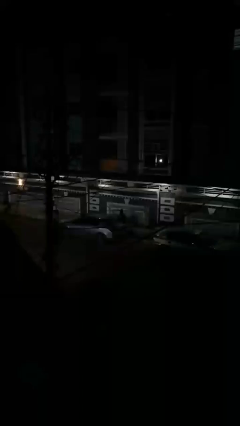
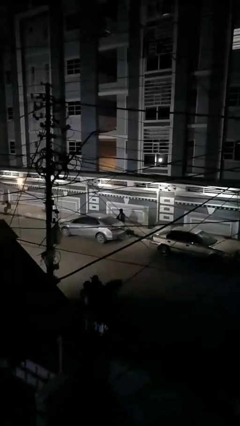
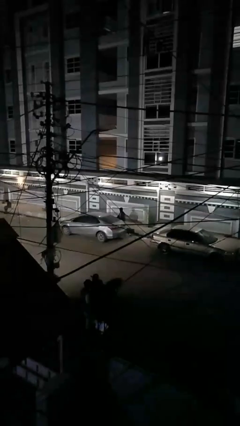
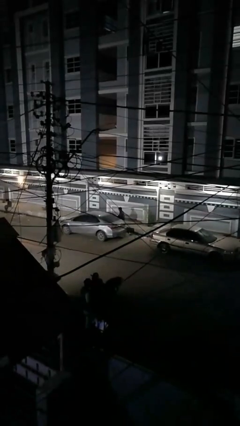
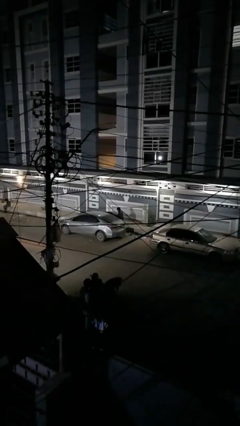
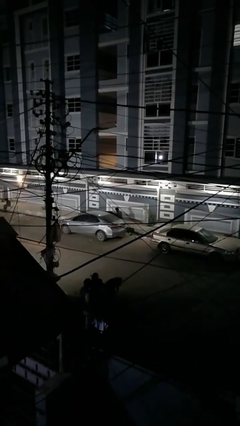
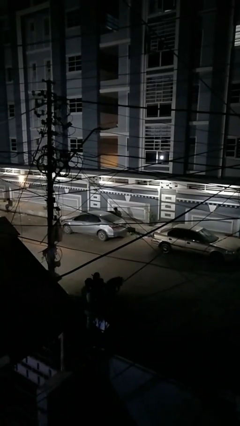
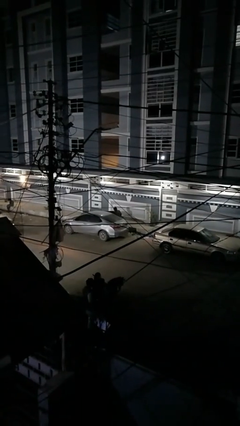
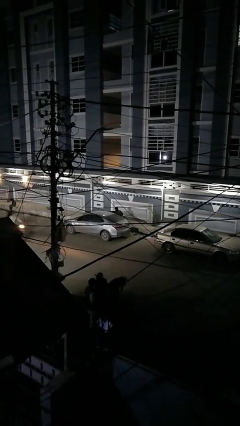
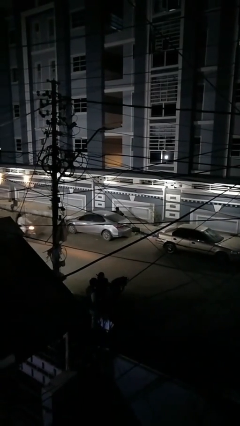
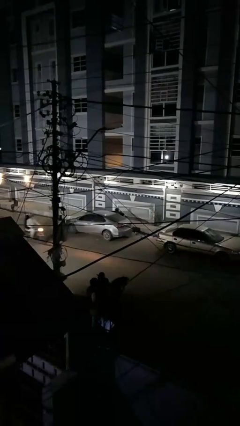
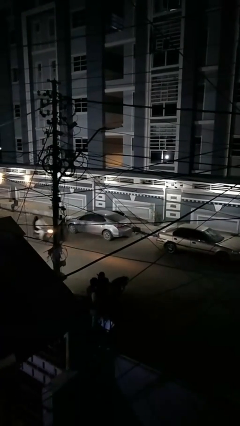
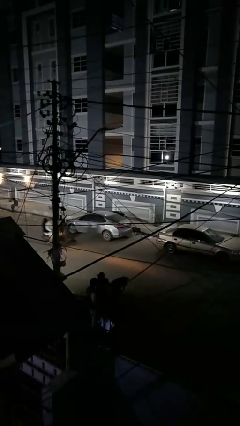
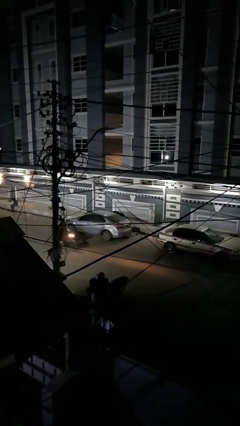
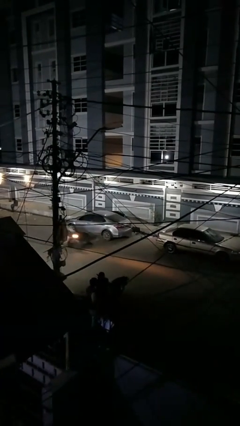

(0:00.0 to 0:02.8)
car picks up person

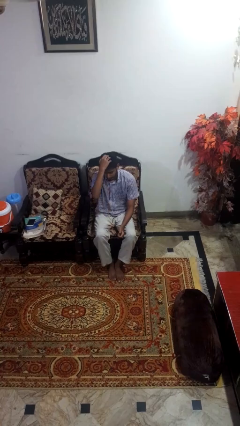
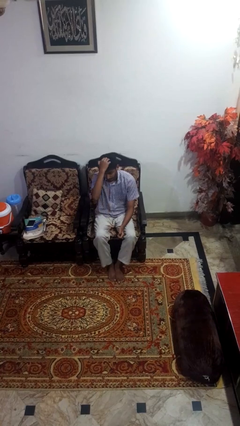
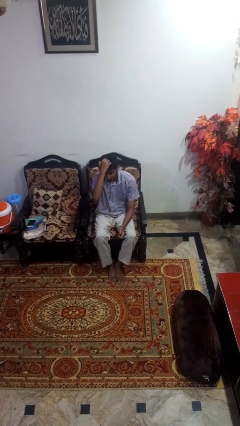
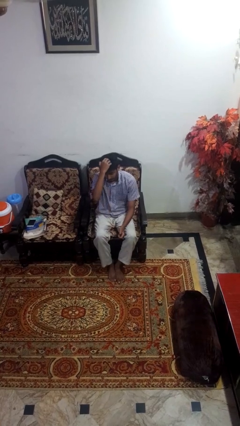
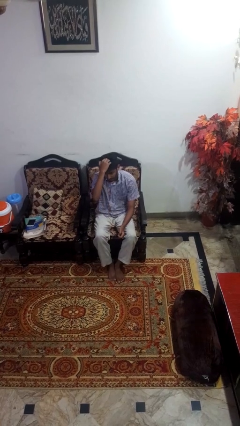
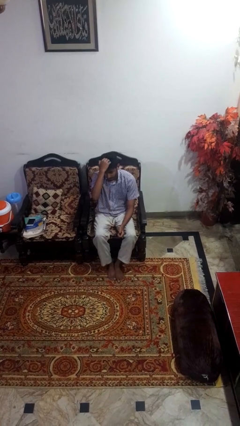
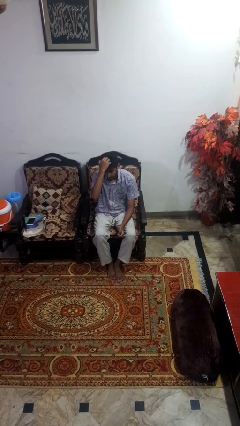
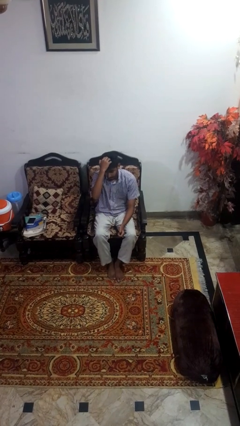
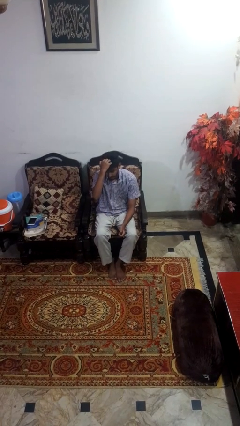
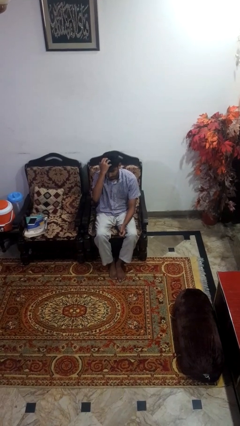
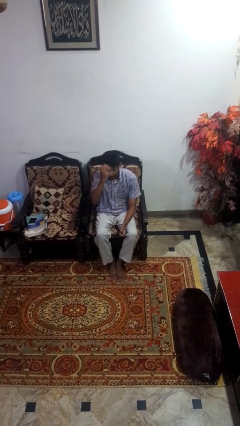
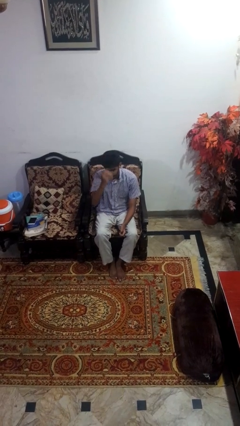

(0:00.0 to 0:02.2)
person scratches face

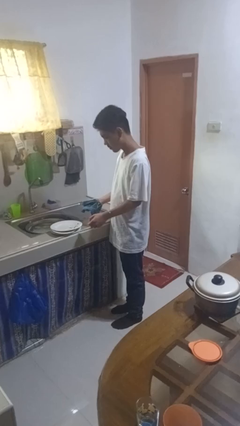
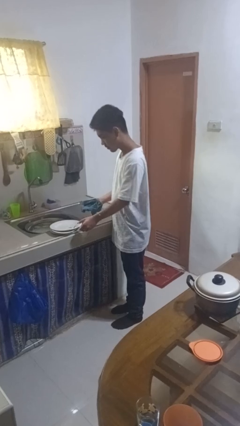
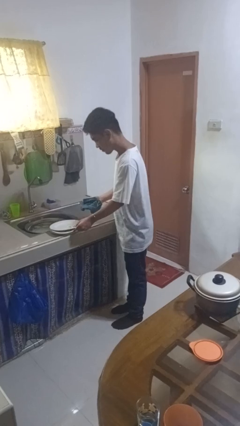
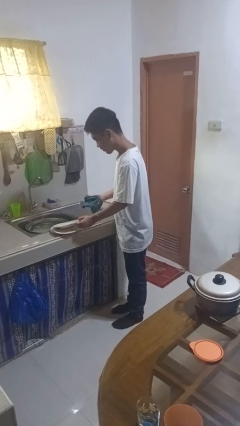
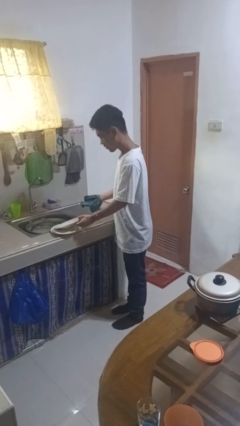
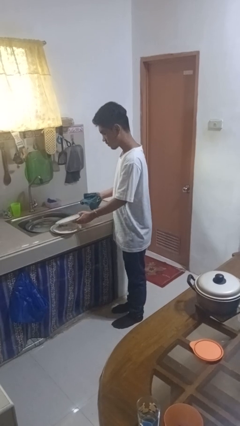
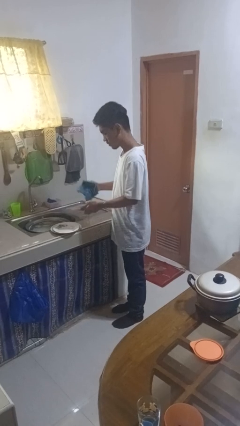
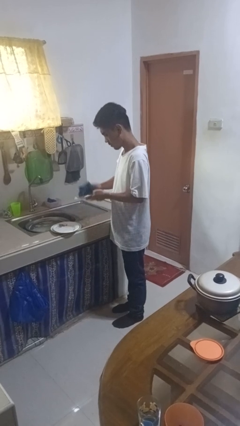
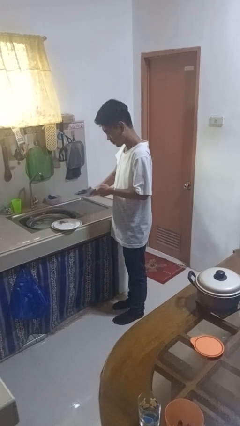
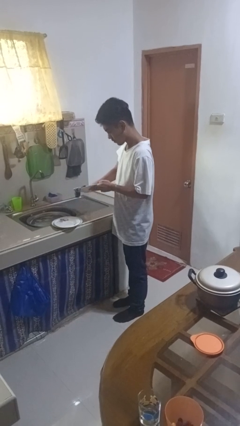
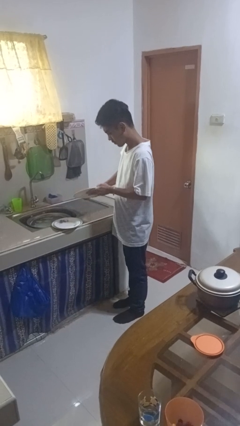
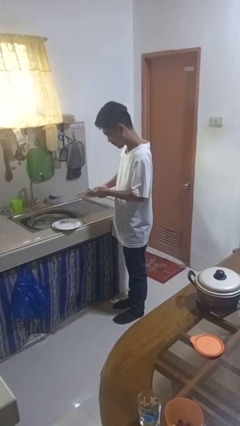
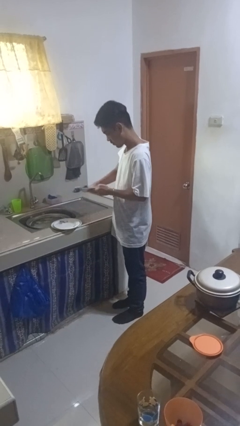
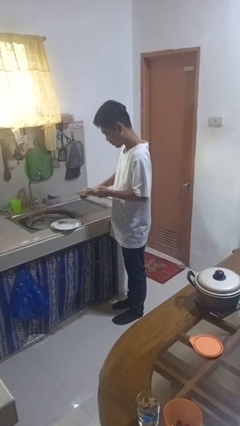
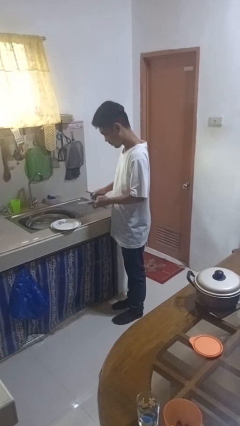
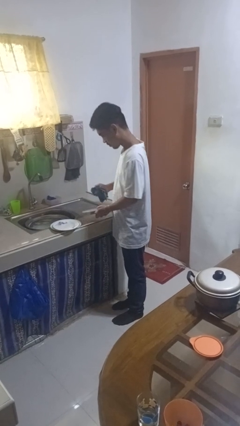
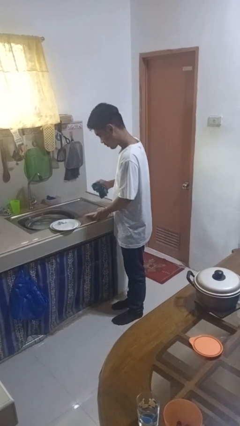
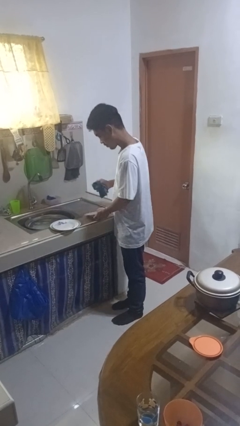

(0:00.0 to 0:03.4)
person dries dish

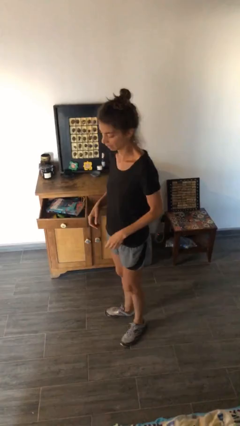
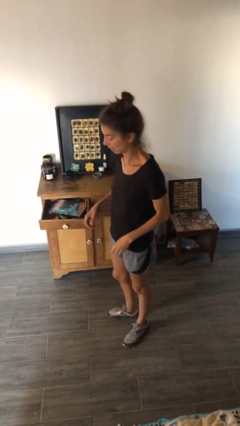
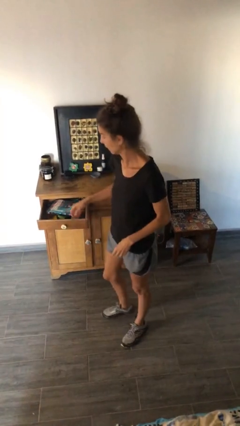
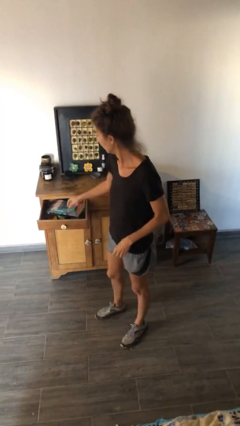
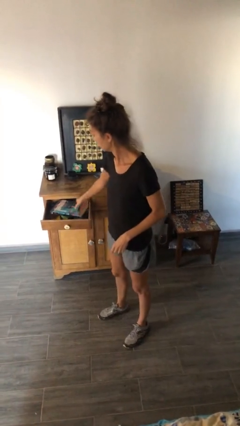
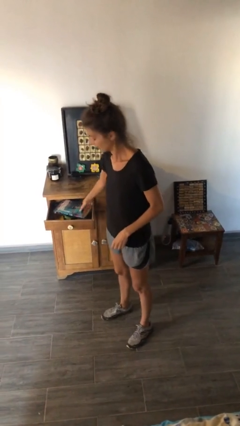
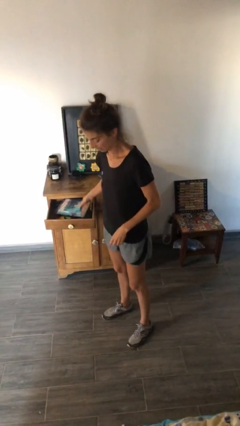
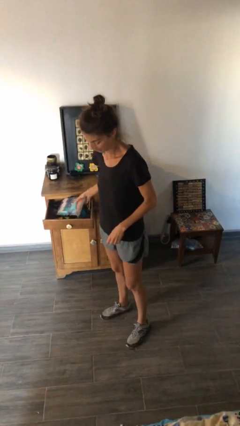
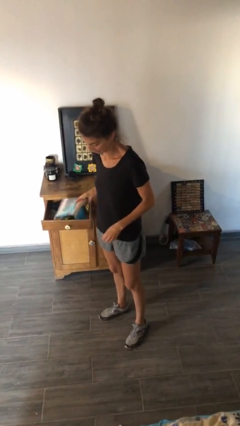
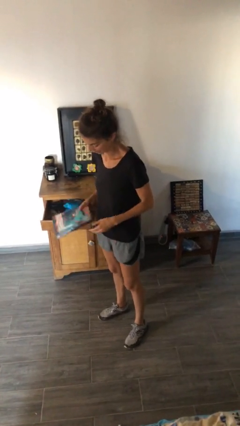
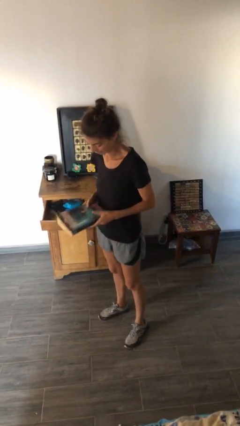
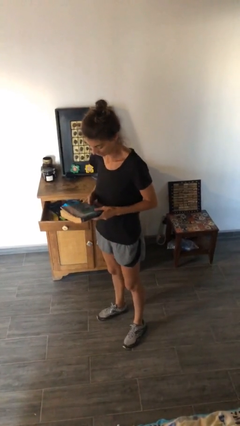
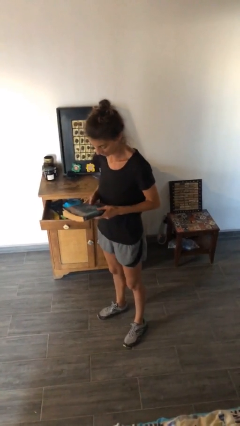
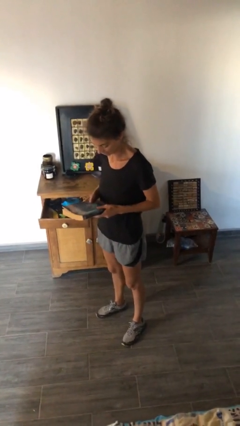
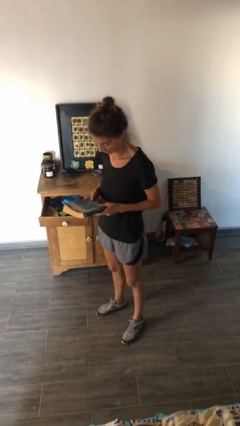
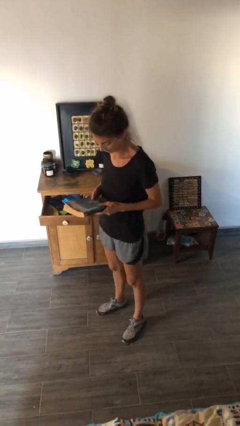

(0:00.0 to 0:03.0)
person picks up object from cabinet

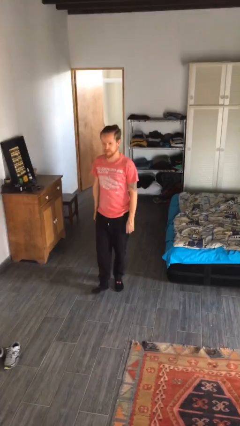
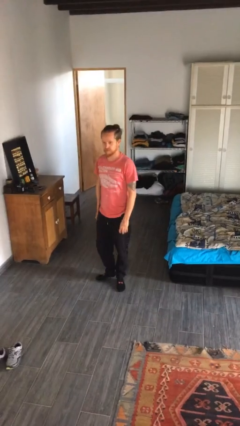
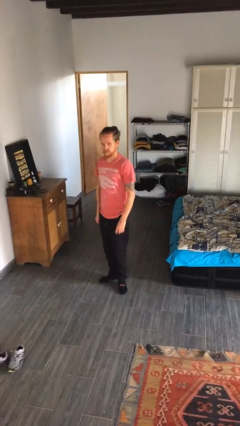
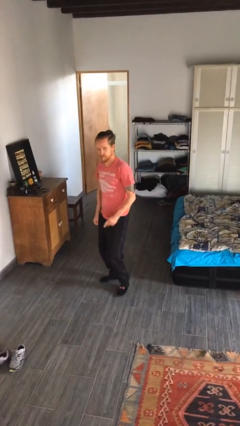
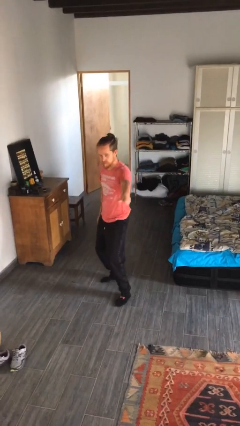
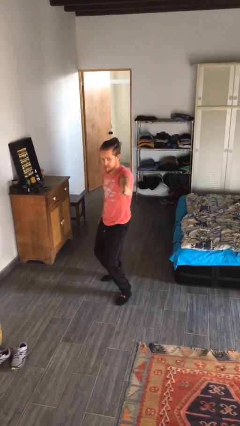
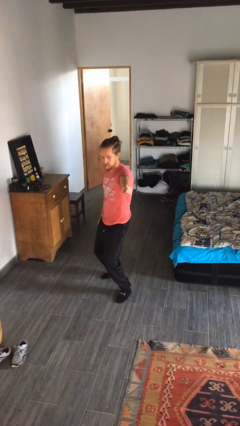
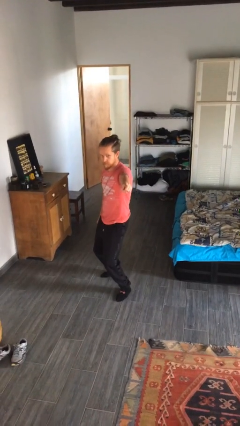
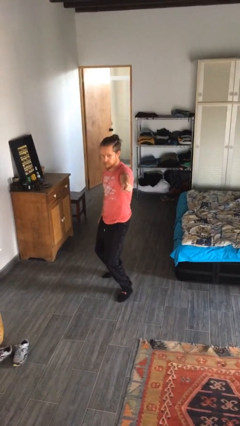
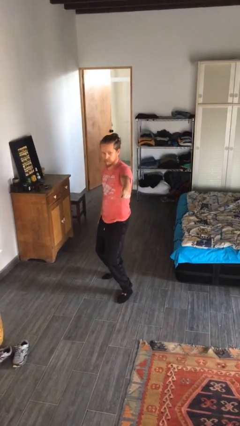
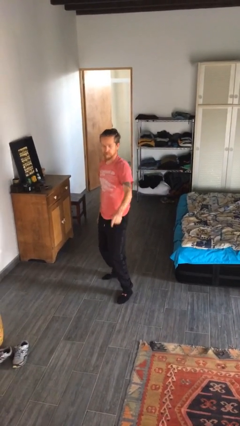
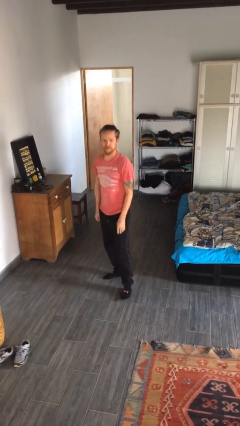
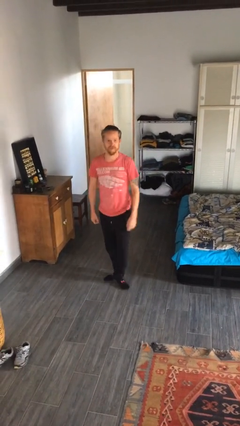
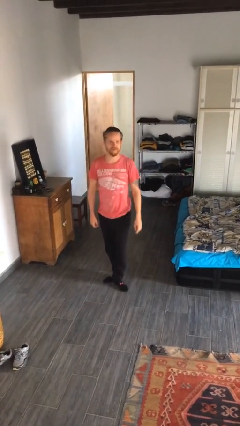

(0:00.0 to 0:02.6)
person points at person

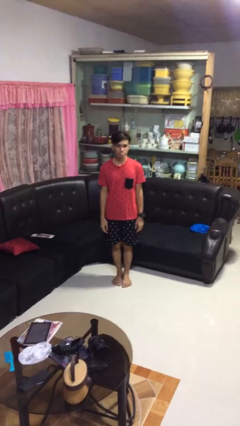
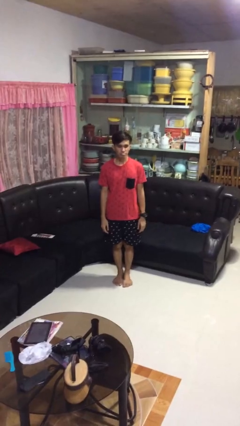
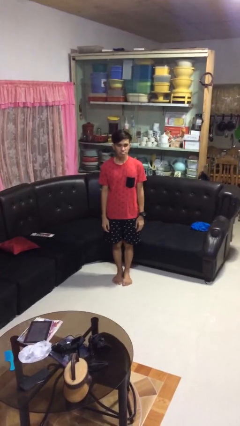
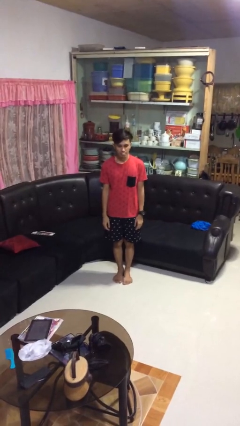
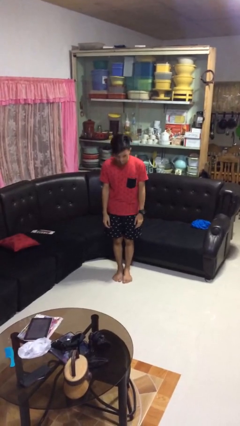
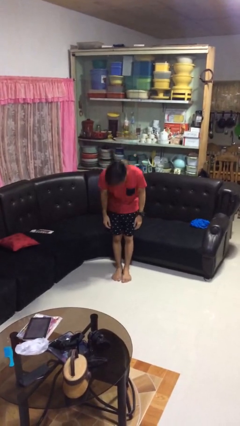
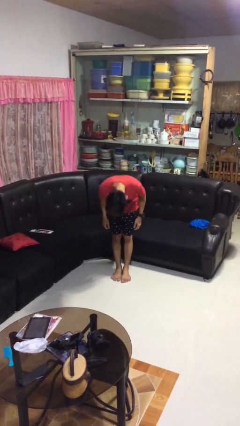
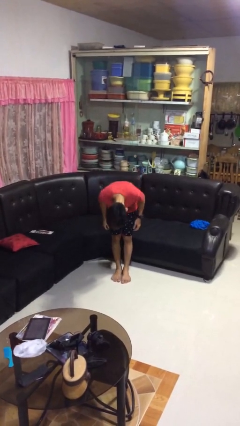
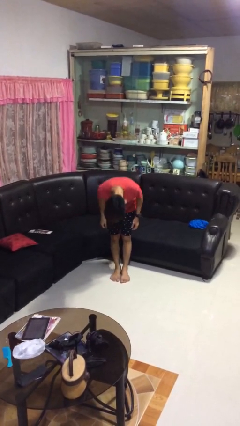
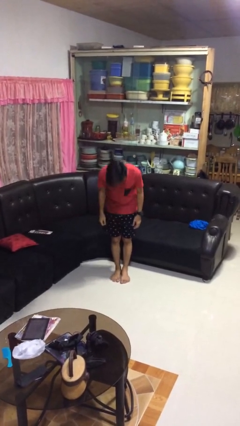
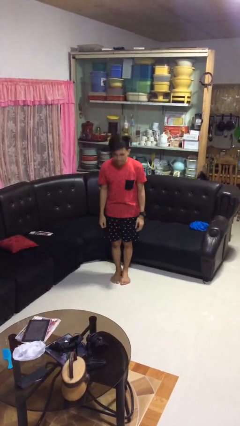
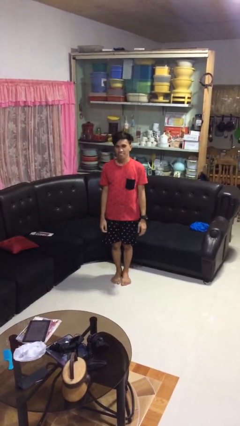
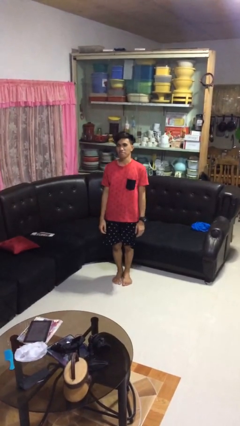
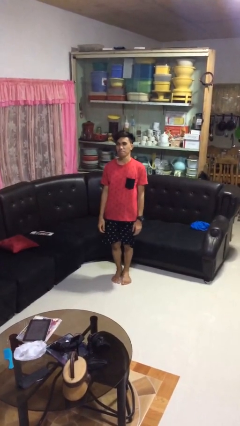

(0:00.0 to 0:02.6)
person bows

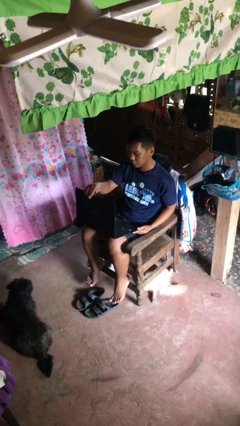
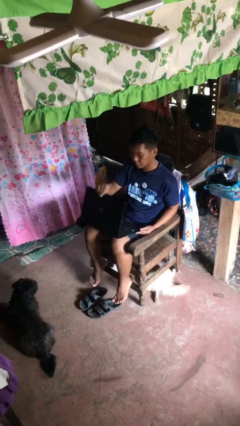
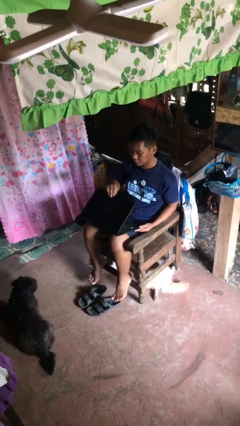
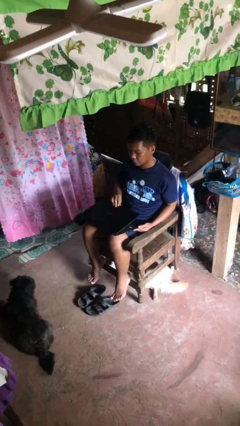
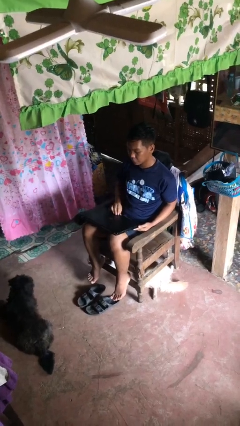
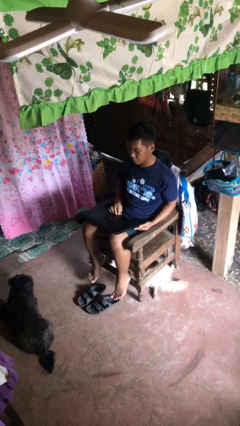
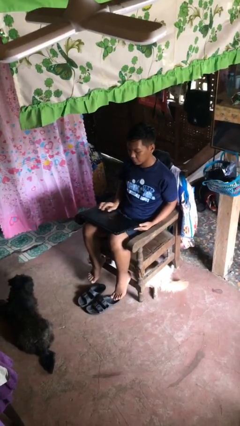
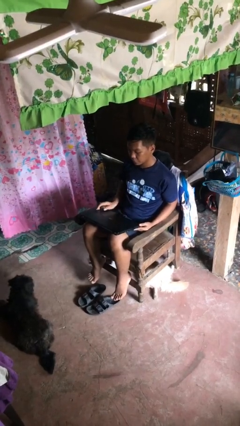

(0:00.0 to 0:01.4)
person closes laptop
